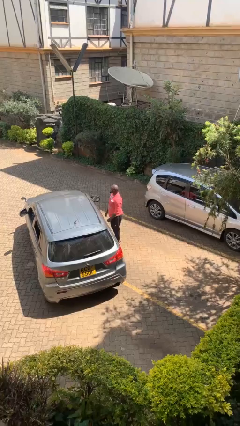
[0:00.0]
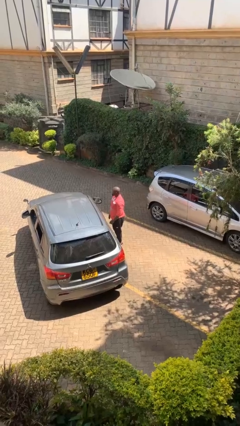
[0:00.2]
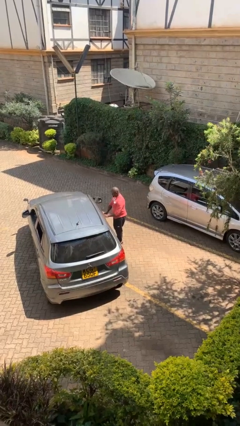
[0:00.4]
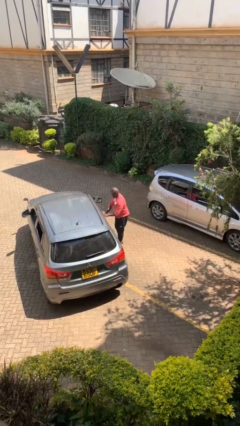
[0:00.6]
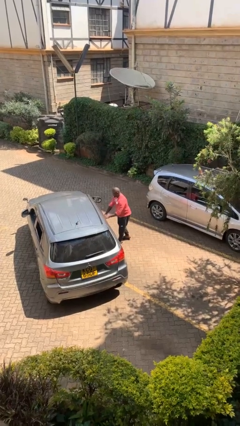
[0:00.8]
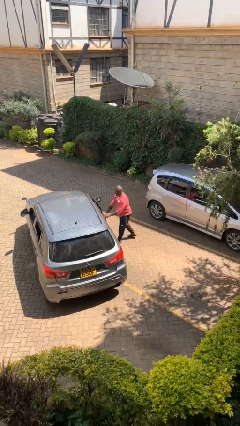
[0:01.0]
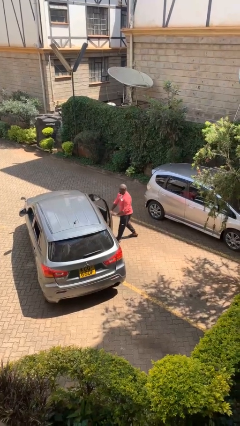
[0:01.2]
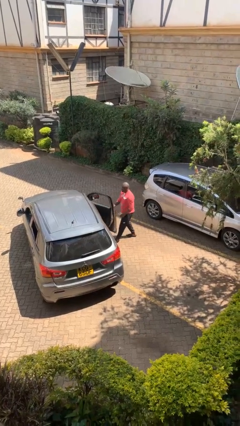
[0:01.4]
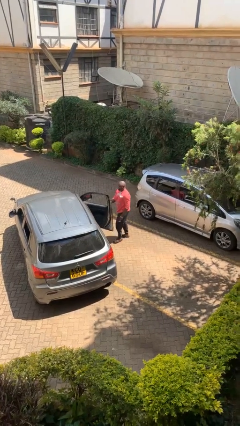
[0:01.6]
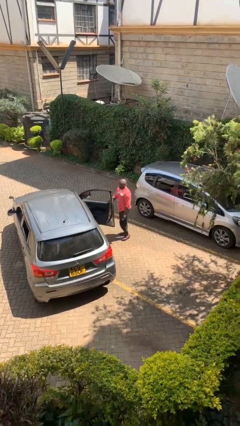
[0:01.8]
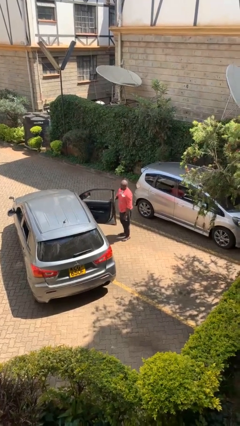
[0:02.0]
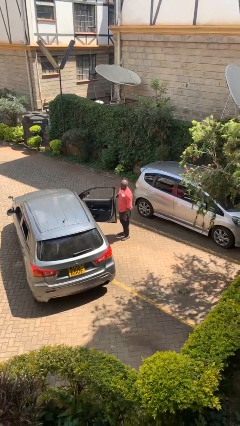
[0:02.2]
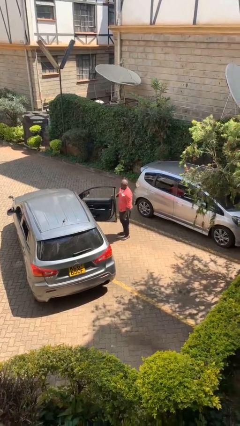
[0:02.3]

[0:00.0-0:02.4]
person opens car door

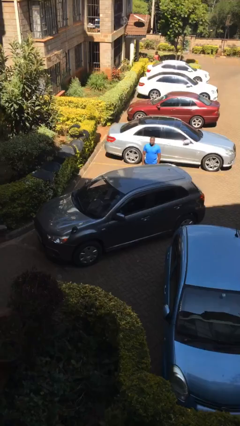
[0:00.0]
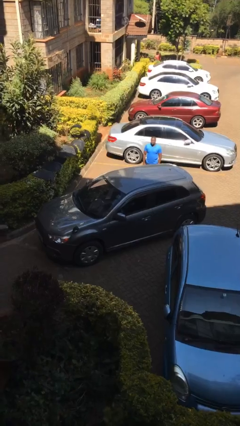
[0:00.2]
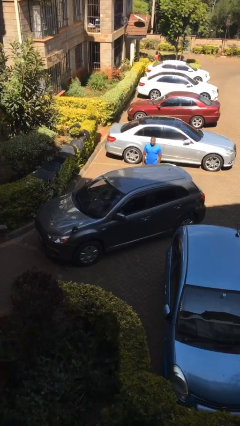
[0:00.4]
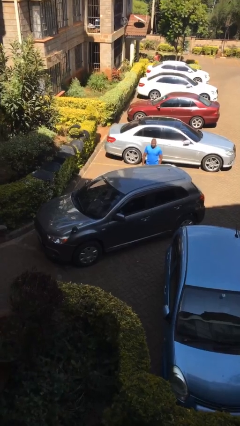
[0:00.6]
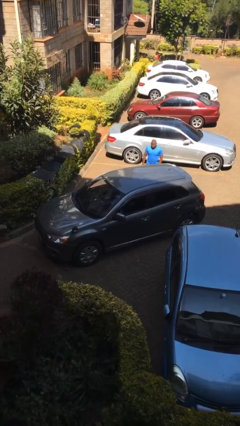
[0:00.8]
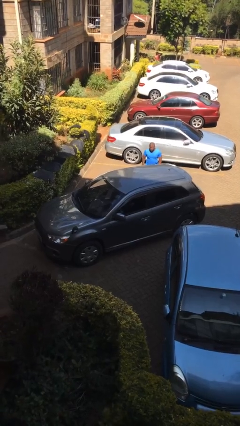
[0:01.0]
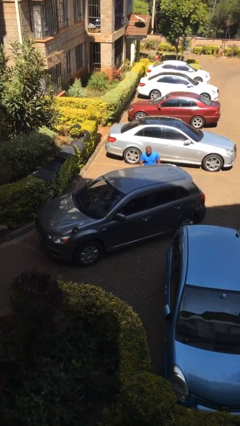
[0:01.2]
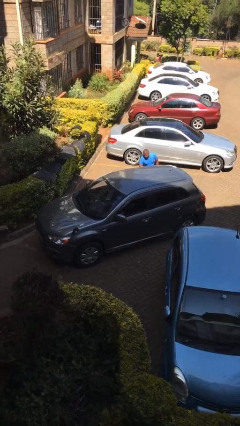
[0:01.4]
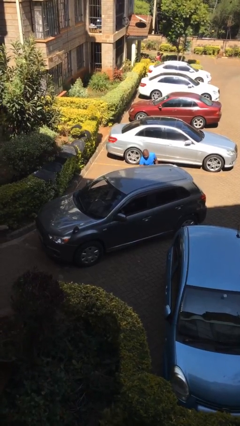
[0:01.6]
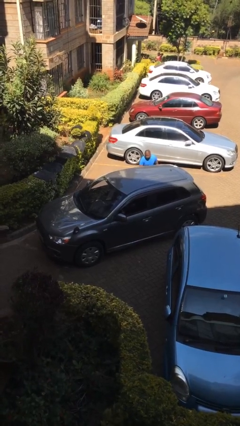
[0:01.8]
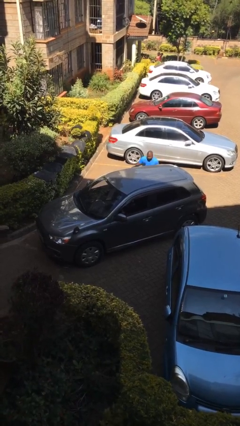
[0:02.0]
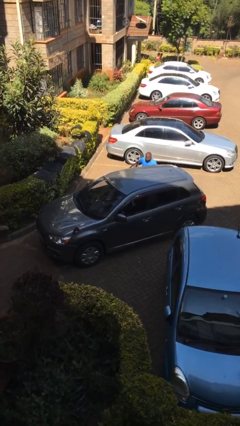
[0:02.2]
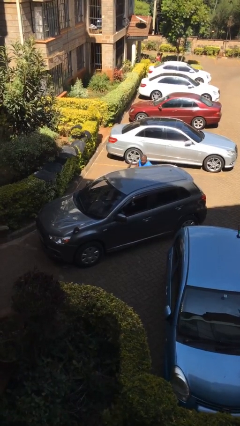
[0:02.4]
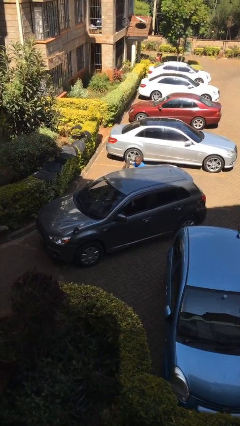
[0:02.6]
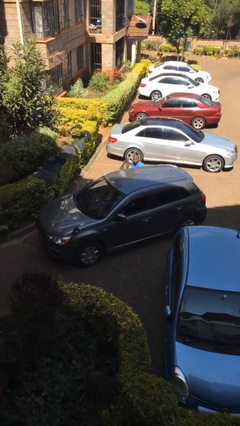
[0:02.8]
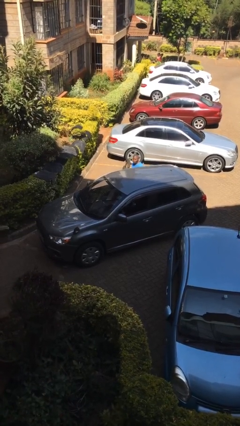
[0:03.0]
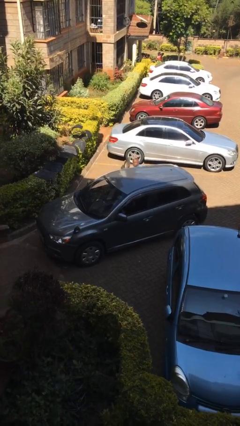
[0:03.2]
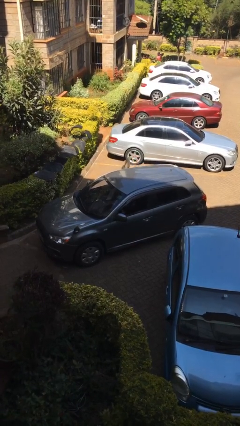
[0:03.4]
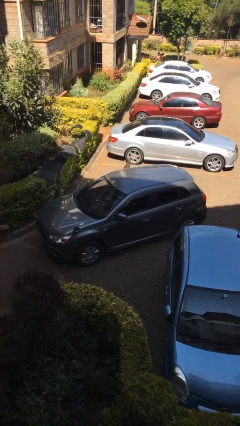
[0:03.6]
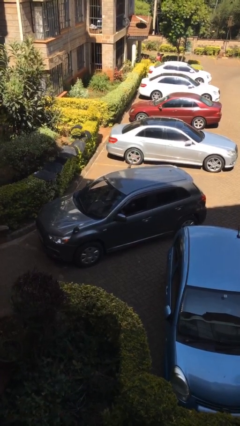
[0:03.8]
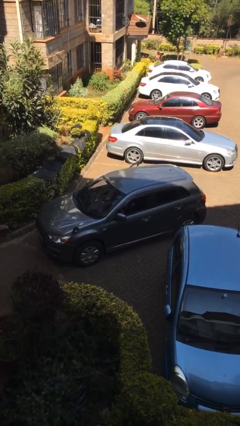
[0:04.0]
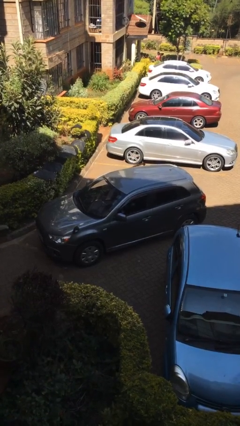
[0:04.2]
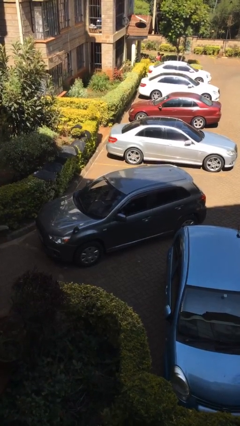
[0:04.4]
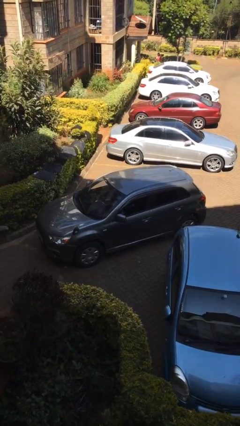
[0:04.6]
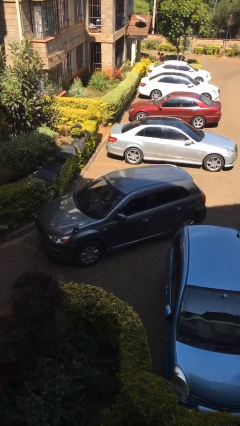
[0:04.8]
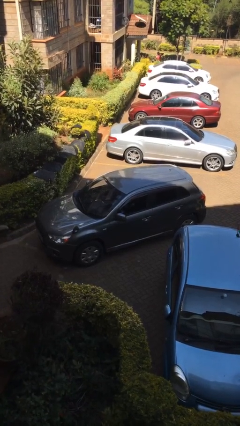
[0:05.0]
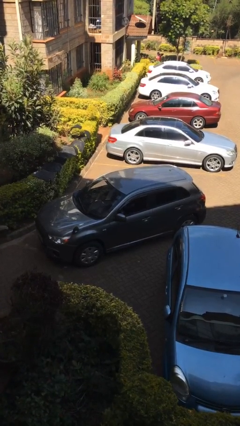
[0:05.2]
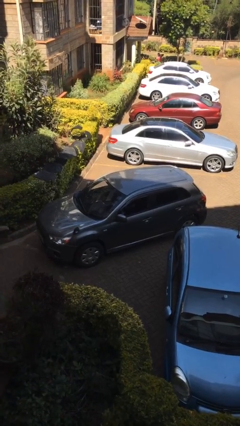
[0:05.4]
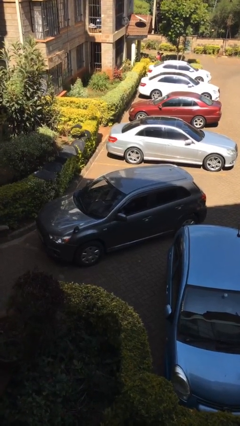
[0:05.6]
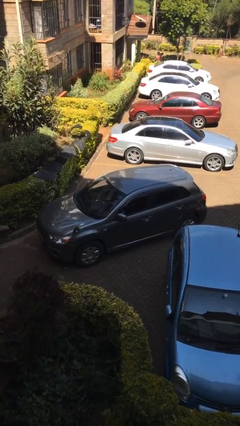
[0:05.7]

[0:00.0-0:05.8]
car picks up person

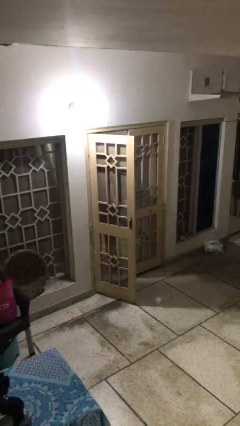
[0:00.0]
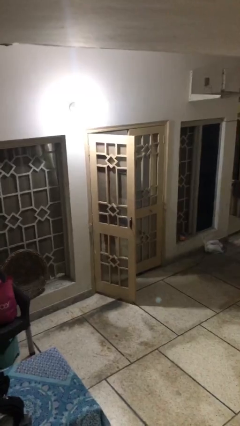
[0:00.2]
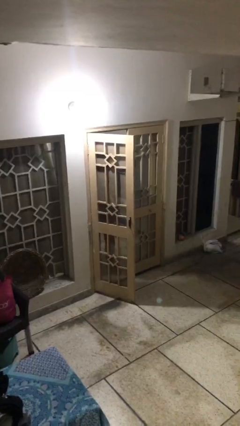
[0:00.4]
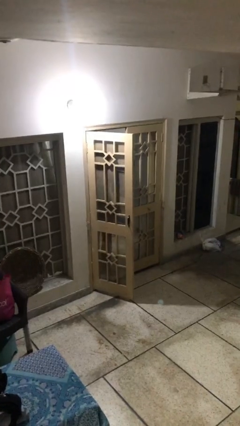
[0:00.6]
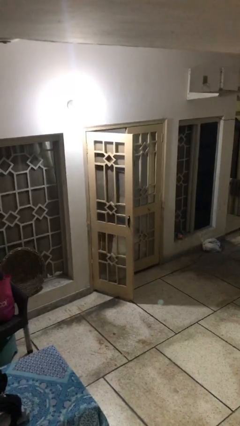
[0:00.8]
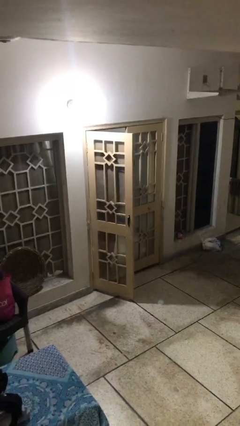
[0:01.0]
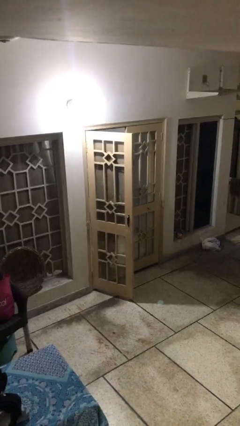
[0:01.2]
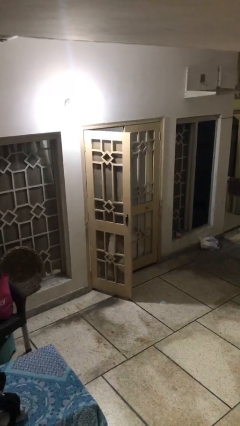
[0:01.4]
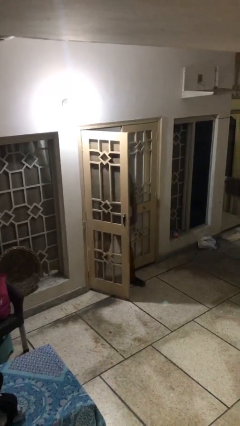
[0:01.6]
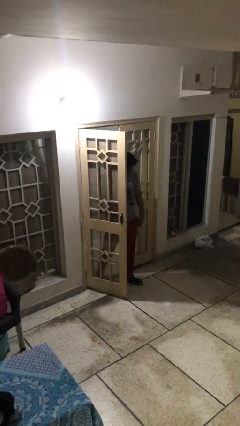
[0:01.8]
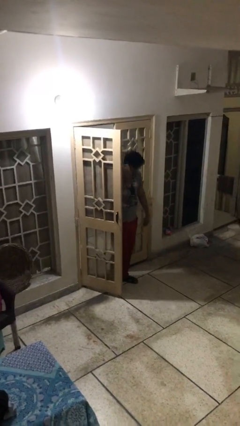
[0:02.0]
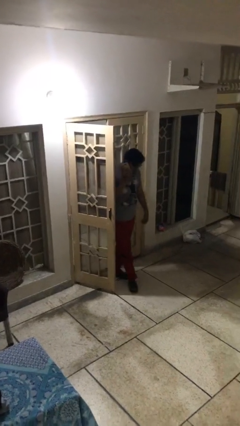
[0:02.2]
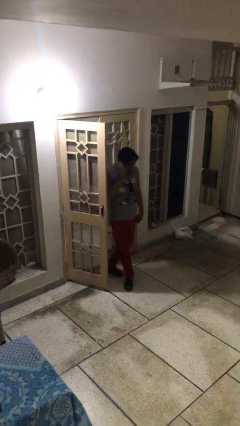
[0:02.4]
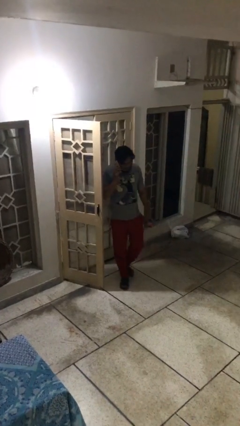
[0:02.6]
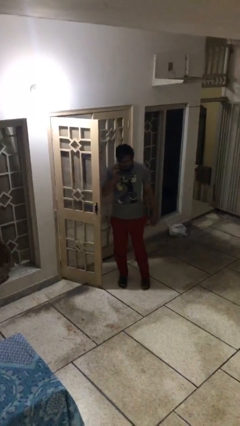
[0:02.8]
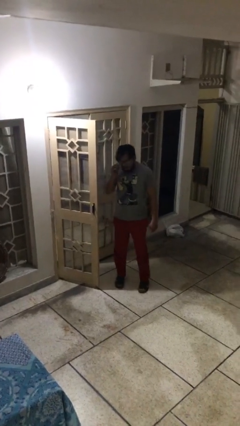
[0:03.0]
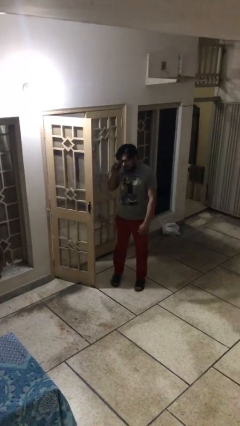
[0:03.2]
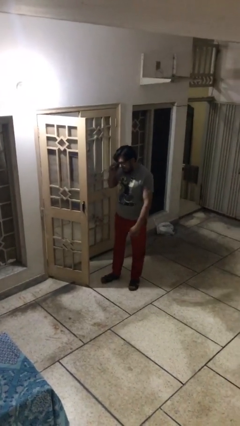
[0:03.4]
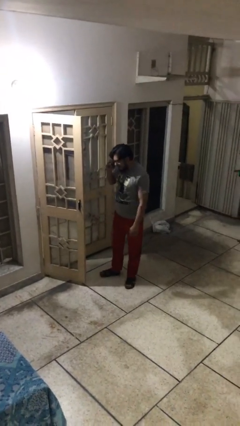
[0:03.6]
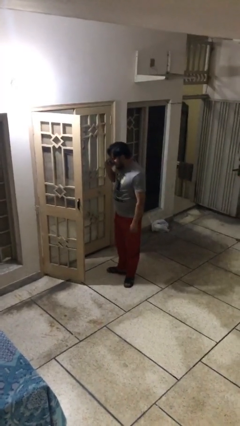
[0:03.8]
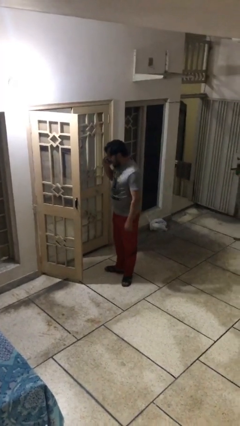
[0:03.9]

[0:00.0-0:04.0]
person enters scene through structure

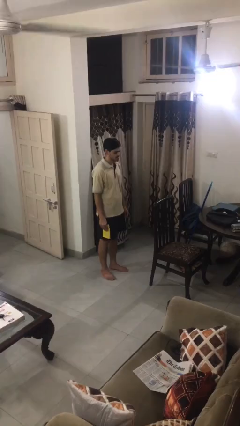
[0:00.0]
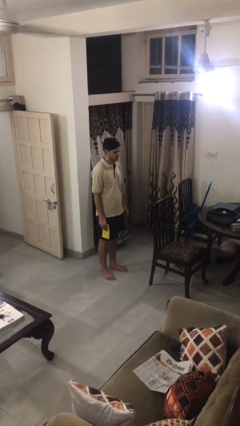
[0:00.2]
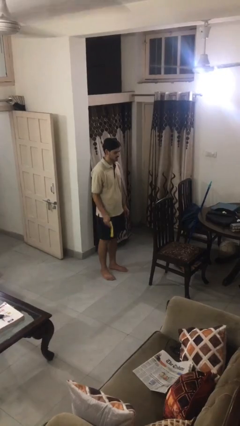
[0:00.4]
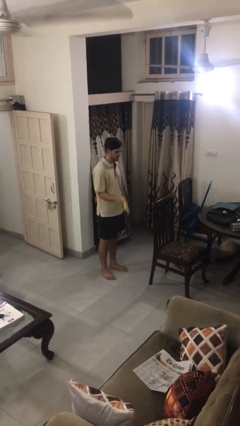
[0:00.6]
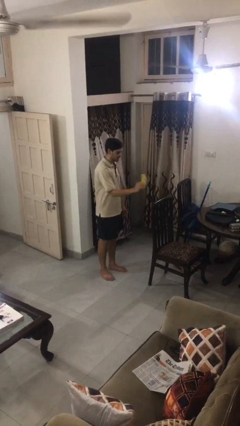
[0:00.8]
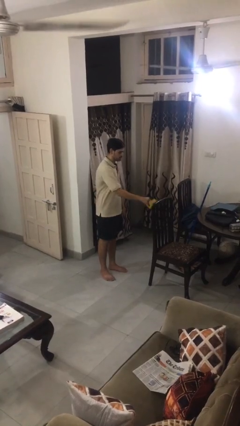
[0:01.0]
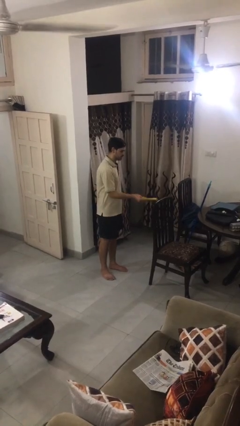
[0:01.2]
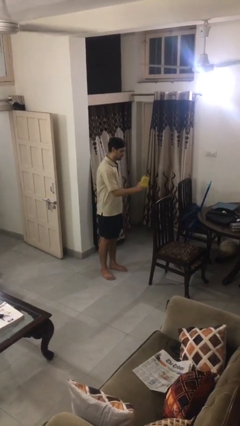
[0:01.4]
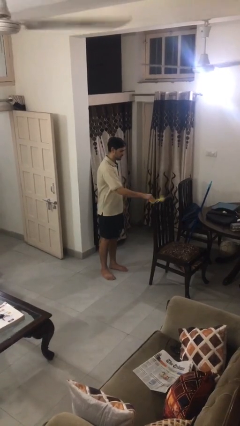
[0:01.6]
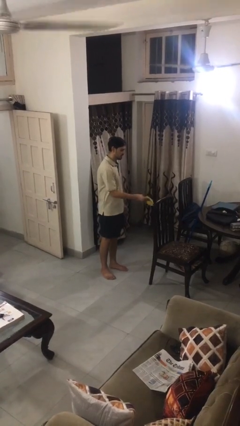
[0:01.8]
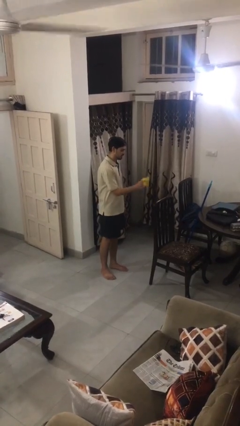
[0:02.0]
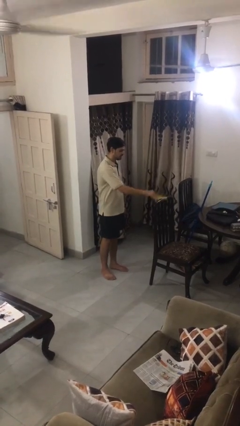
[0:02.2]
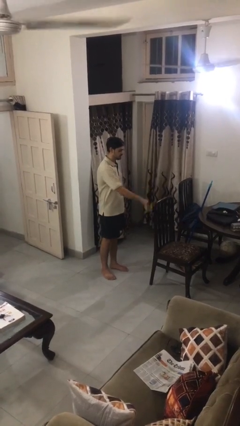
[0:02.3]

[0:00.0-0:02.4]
person dusts furniture

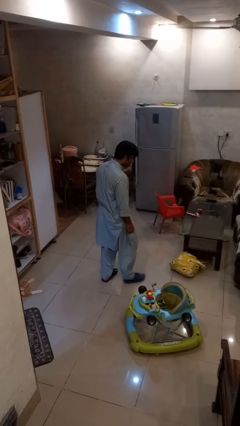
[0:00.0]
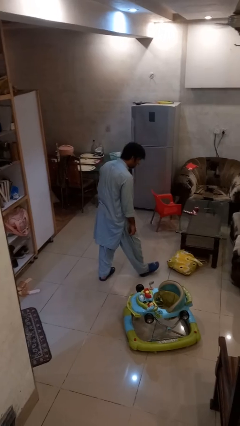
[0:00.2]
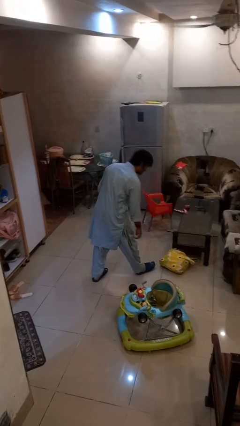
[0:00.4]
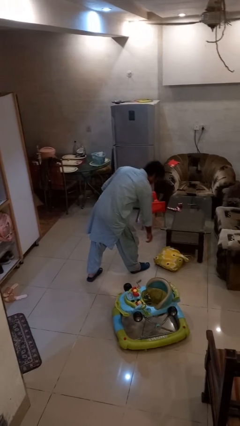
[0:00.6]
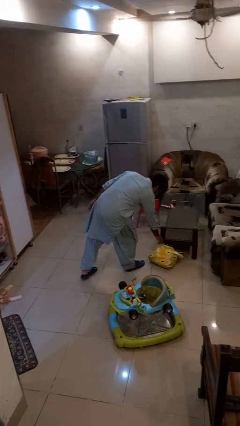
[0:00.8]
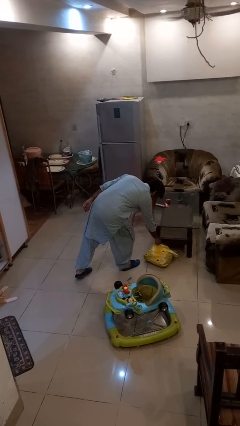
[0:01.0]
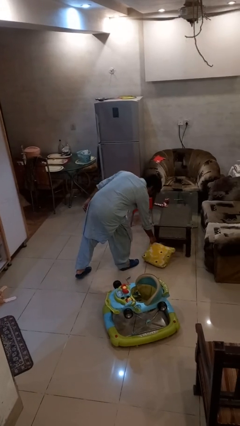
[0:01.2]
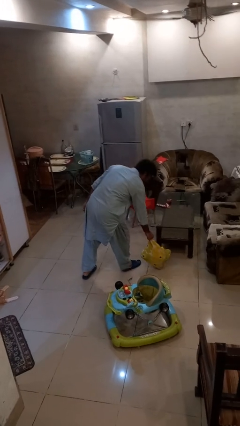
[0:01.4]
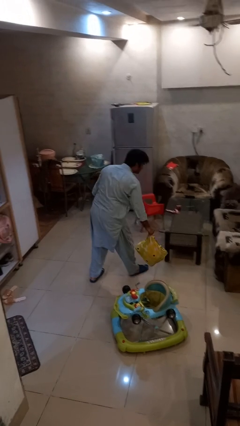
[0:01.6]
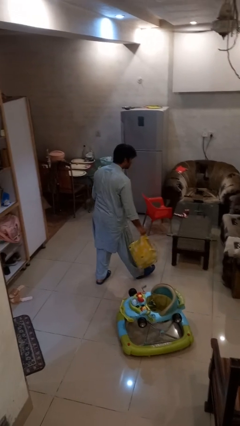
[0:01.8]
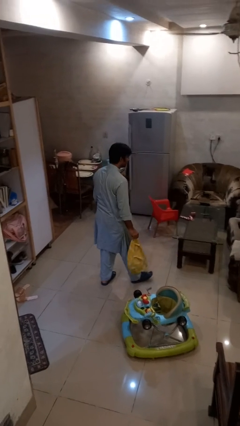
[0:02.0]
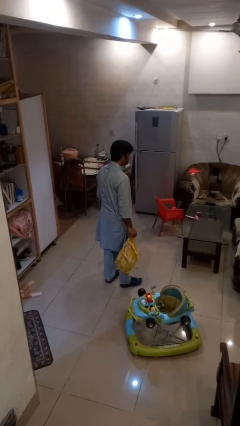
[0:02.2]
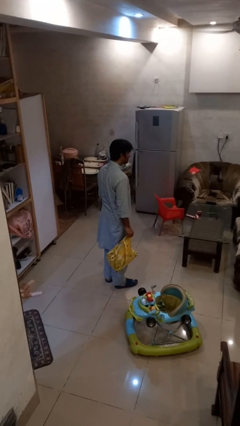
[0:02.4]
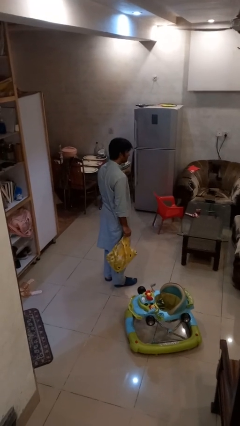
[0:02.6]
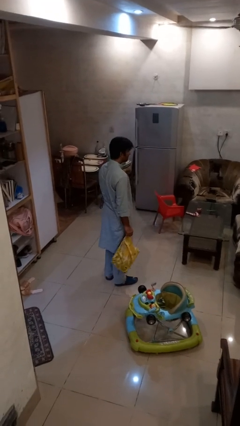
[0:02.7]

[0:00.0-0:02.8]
person picks up object from floor

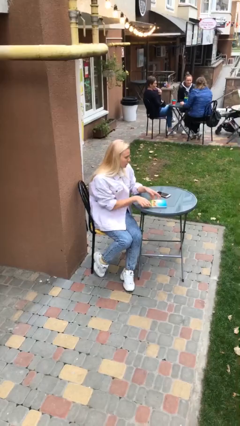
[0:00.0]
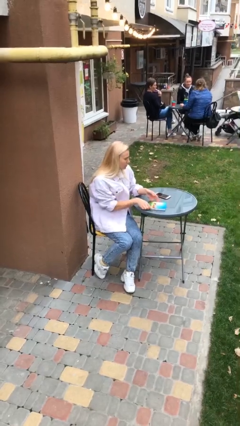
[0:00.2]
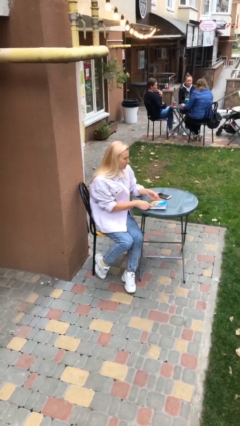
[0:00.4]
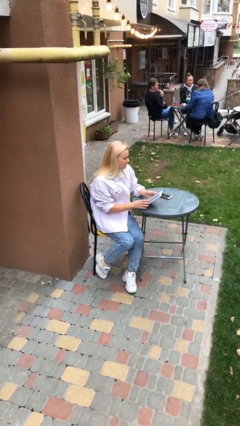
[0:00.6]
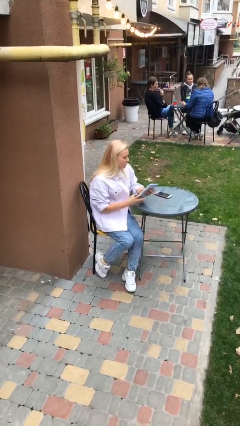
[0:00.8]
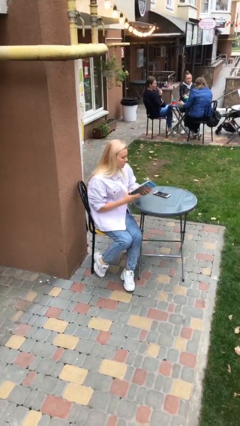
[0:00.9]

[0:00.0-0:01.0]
person picks up object from table
